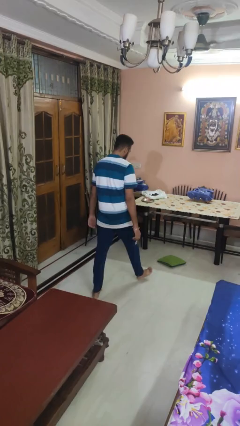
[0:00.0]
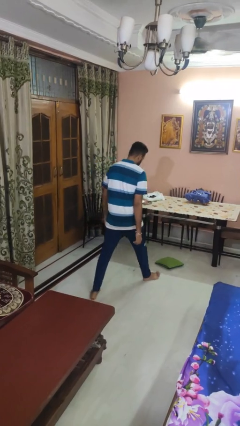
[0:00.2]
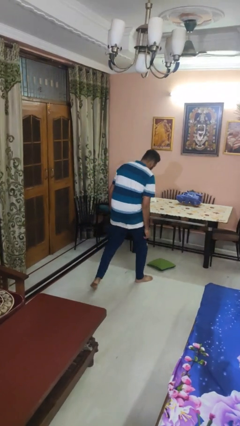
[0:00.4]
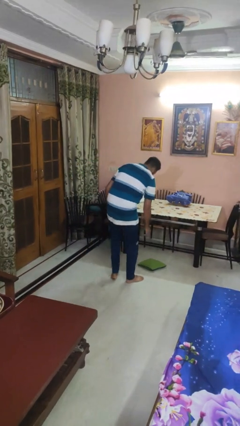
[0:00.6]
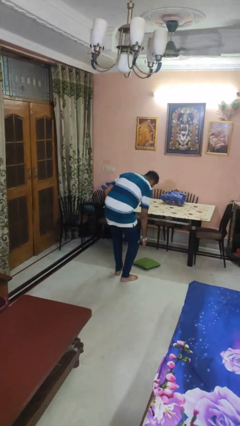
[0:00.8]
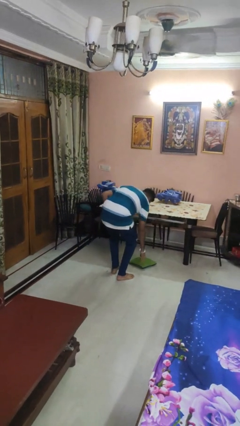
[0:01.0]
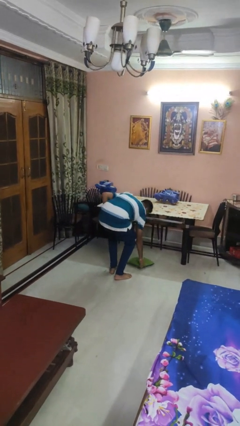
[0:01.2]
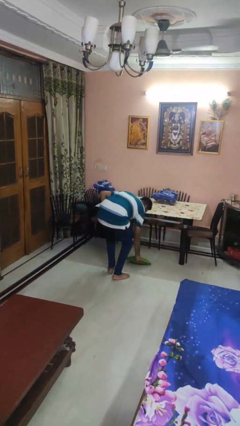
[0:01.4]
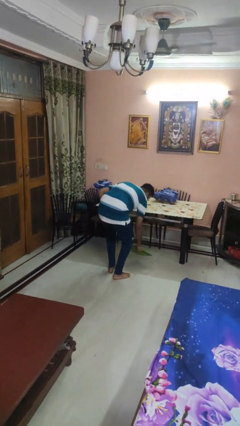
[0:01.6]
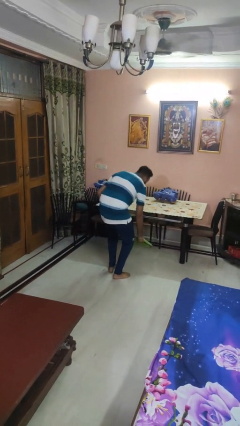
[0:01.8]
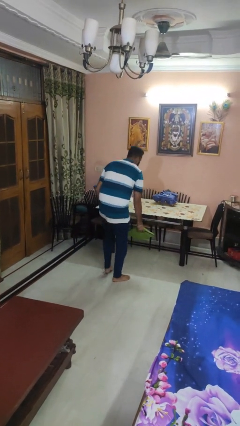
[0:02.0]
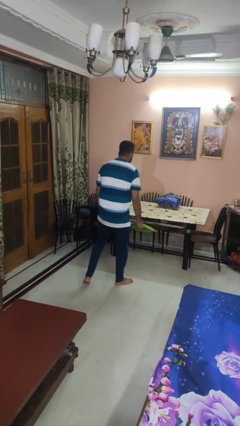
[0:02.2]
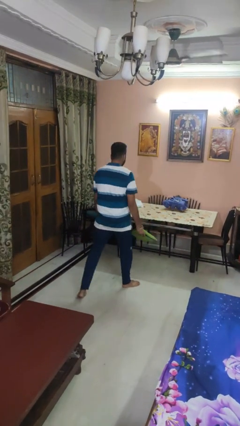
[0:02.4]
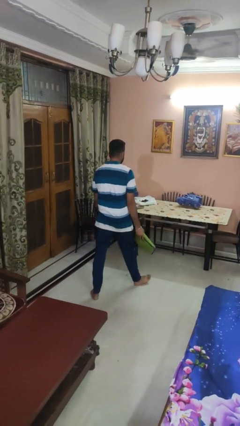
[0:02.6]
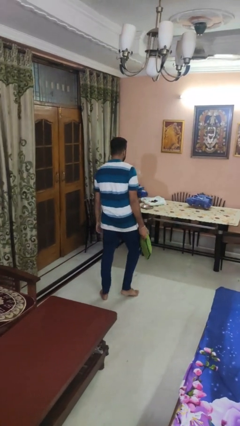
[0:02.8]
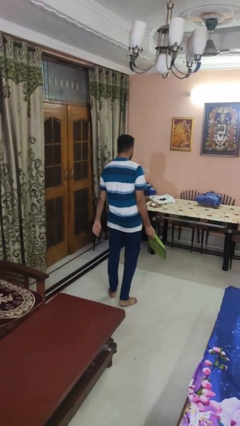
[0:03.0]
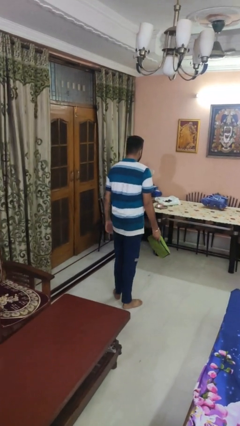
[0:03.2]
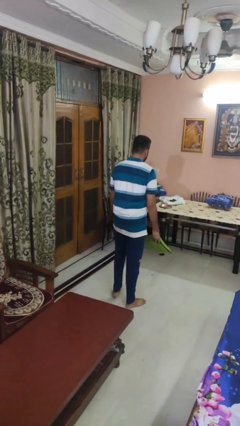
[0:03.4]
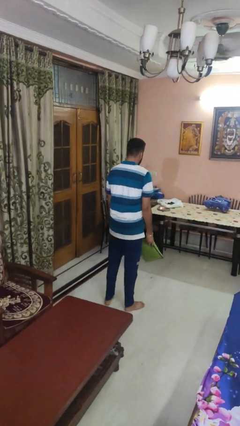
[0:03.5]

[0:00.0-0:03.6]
person picks up object from floor

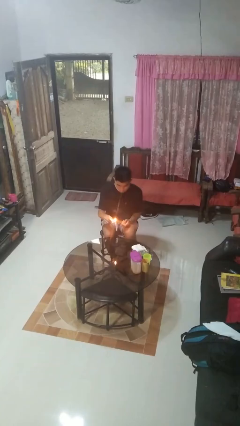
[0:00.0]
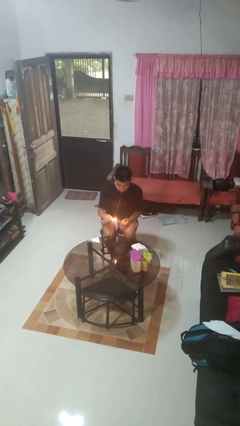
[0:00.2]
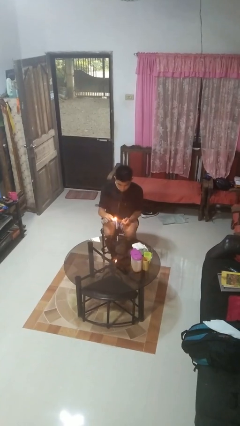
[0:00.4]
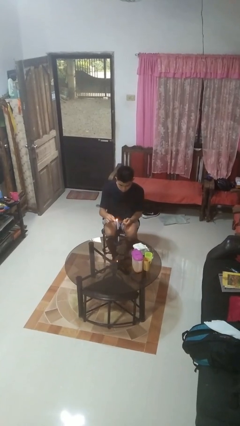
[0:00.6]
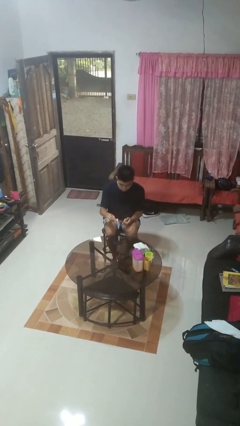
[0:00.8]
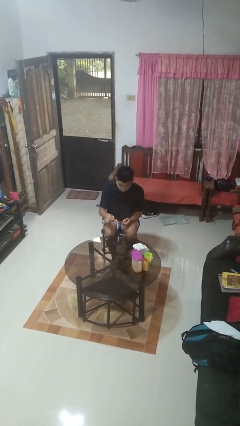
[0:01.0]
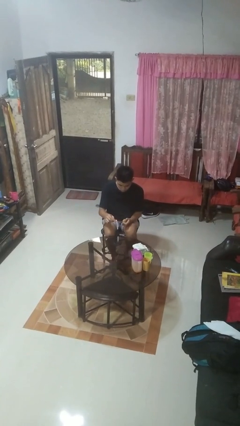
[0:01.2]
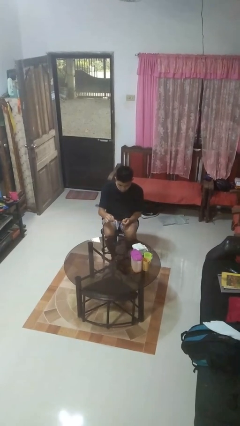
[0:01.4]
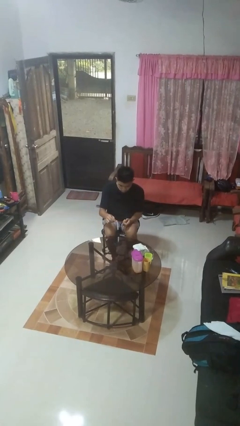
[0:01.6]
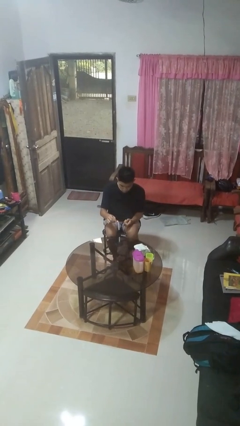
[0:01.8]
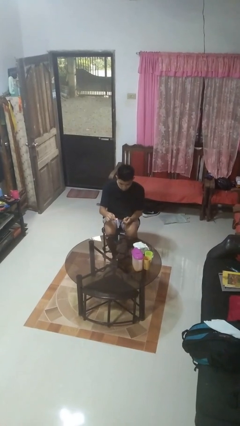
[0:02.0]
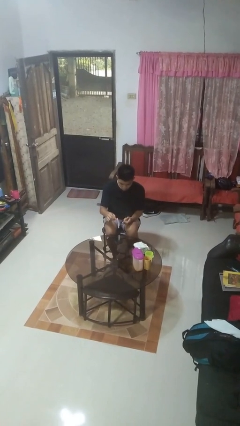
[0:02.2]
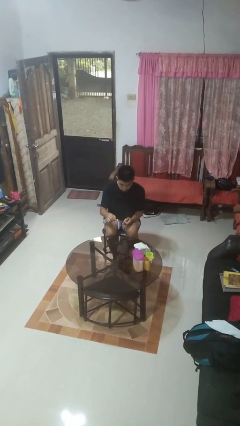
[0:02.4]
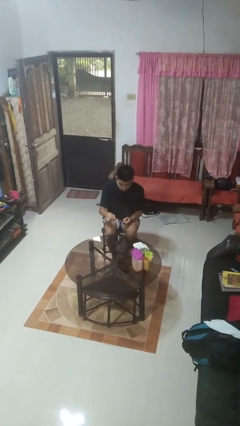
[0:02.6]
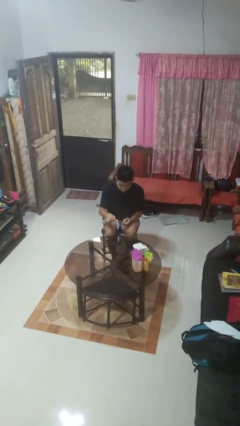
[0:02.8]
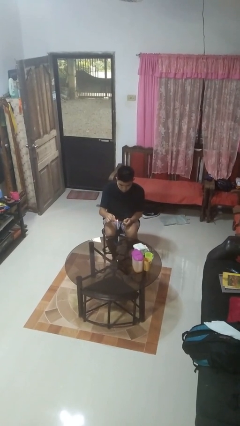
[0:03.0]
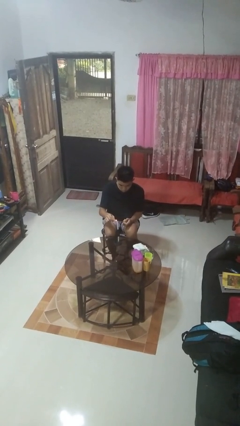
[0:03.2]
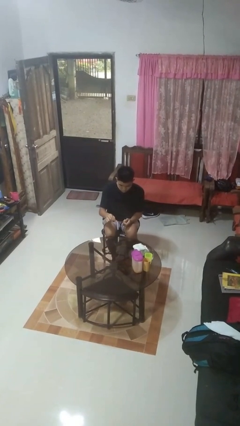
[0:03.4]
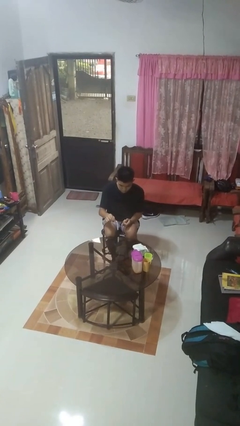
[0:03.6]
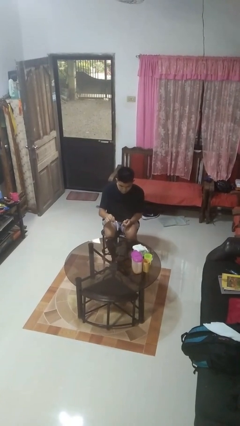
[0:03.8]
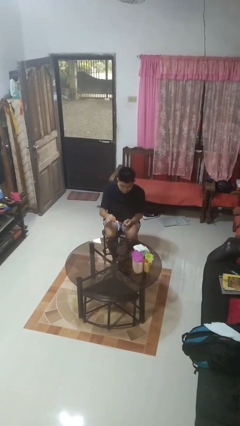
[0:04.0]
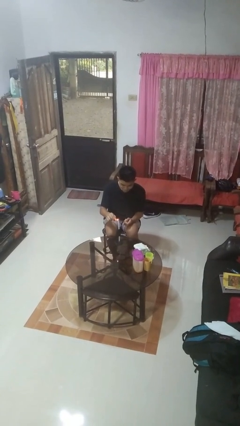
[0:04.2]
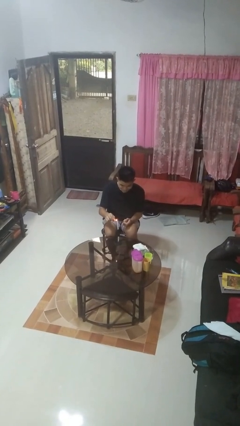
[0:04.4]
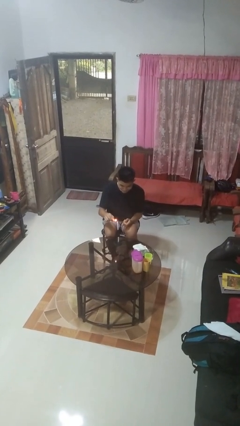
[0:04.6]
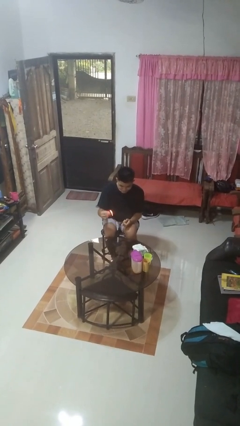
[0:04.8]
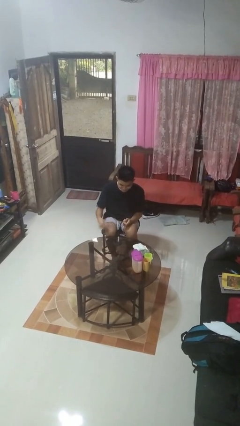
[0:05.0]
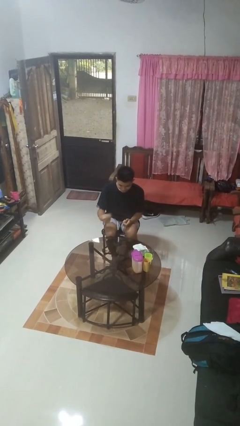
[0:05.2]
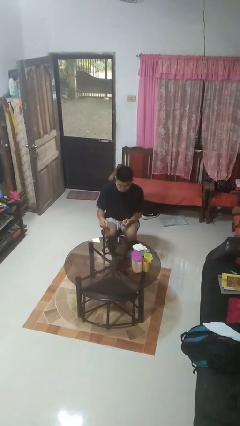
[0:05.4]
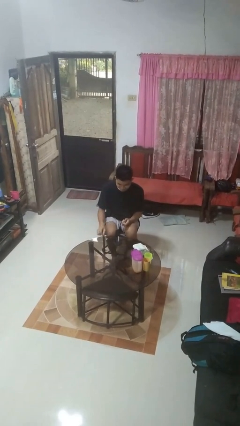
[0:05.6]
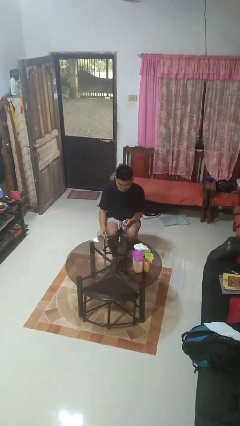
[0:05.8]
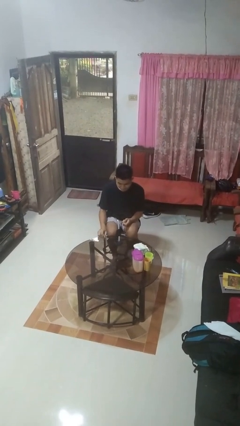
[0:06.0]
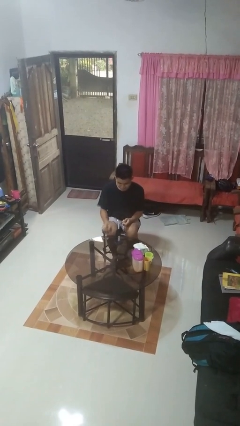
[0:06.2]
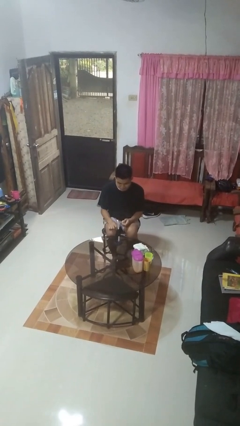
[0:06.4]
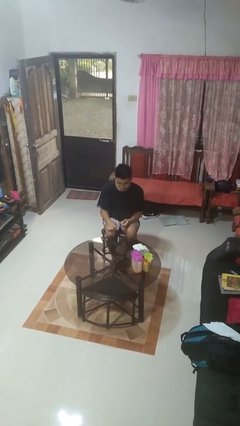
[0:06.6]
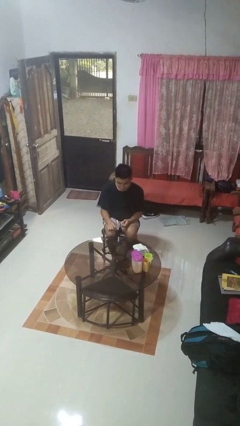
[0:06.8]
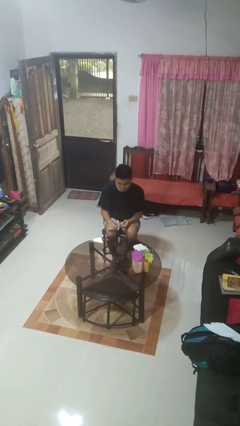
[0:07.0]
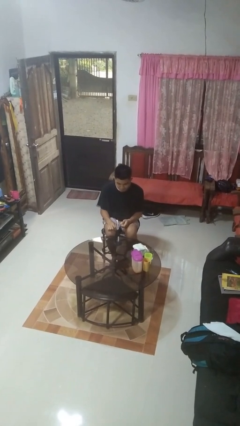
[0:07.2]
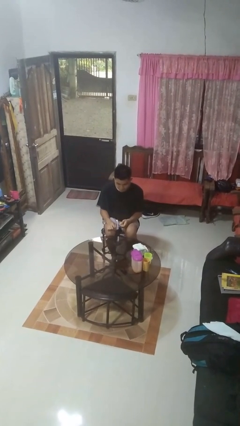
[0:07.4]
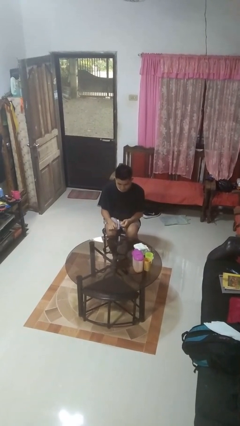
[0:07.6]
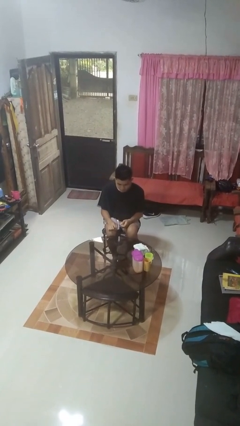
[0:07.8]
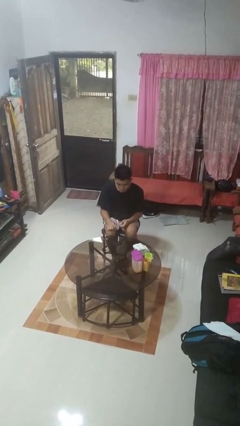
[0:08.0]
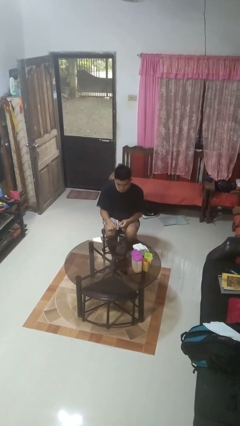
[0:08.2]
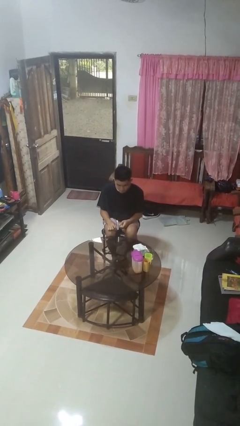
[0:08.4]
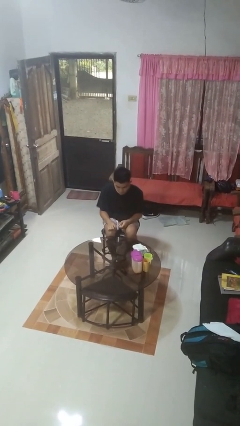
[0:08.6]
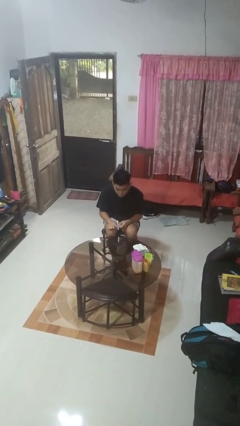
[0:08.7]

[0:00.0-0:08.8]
person lights candle

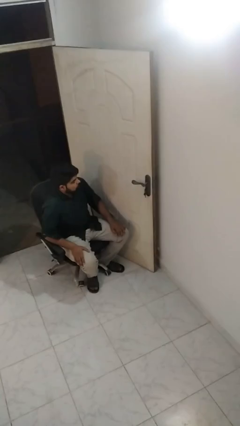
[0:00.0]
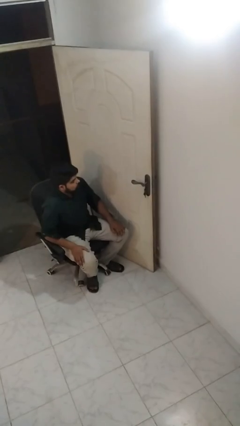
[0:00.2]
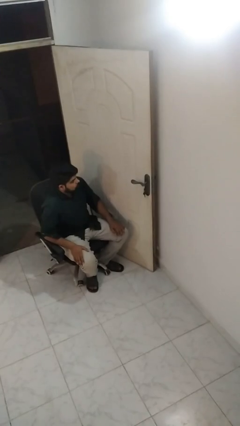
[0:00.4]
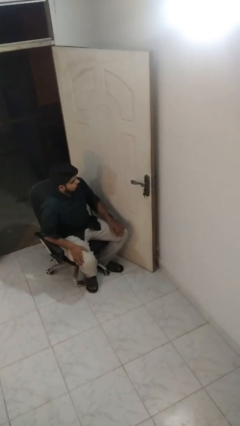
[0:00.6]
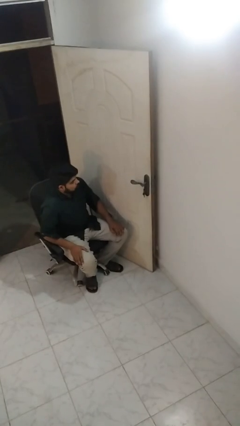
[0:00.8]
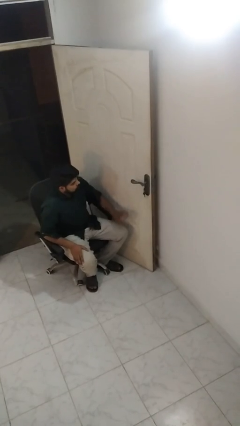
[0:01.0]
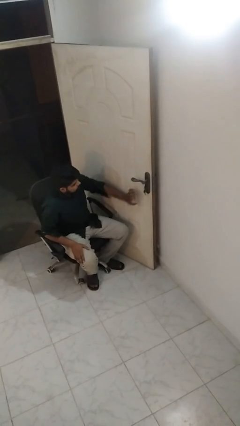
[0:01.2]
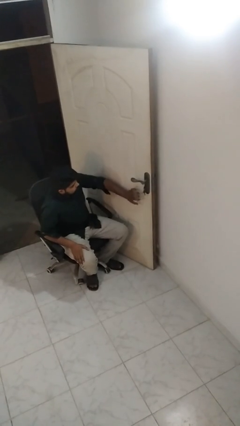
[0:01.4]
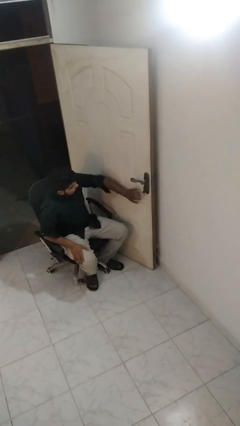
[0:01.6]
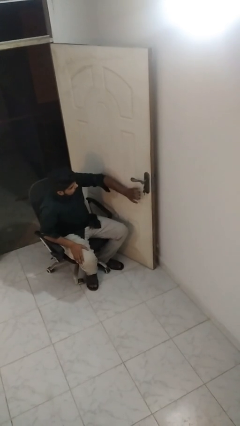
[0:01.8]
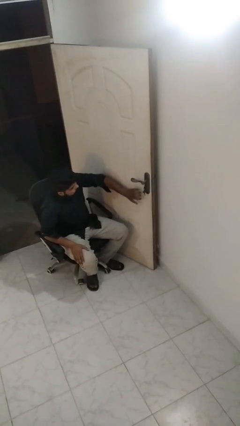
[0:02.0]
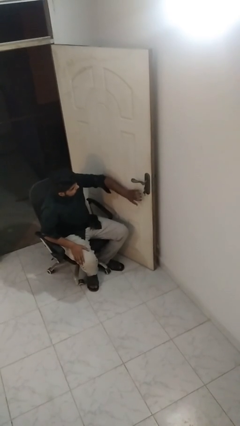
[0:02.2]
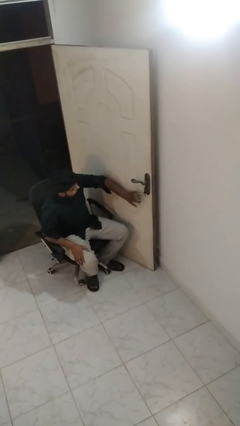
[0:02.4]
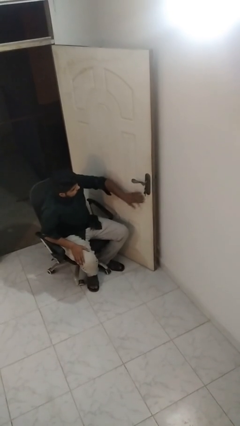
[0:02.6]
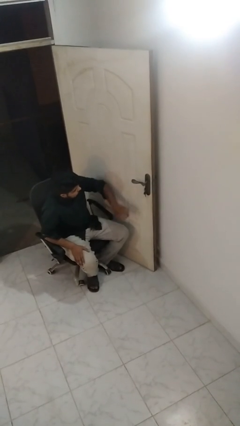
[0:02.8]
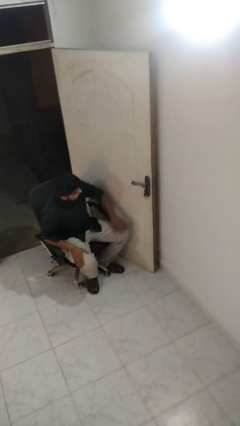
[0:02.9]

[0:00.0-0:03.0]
person taps object with finger

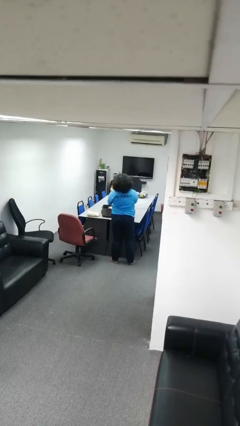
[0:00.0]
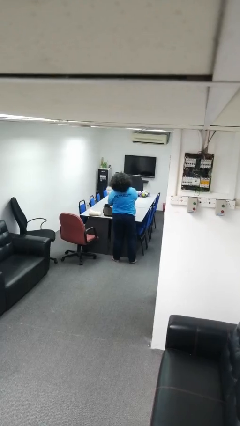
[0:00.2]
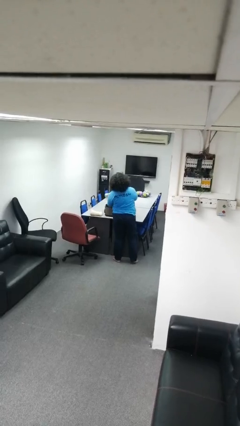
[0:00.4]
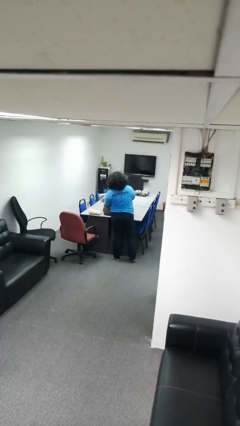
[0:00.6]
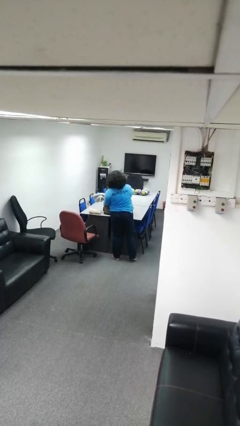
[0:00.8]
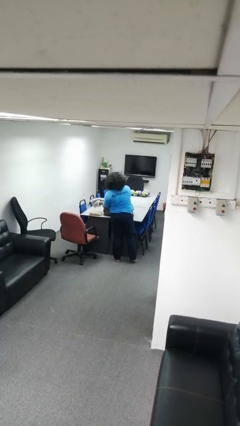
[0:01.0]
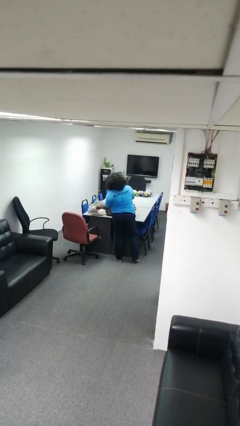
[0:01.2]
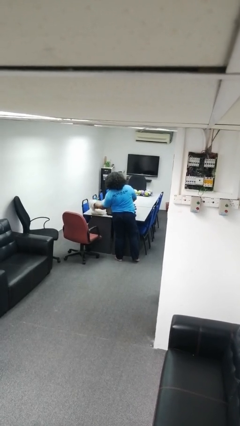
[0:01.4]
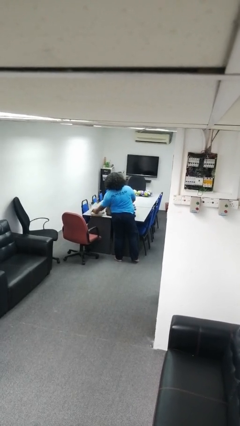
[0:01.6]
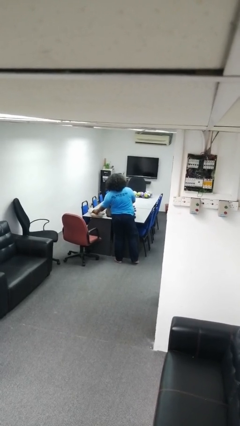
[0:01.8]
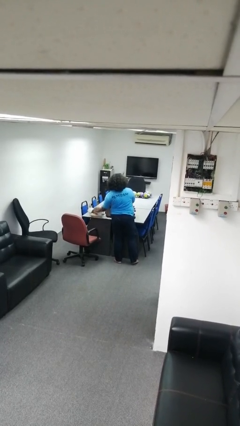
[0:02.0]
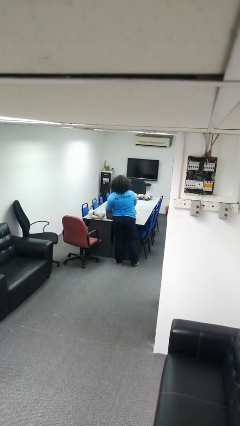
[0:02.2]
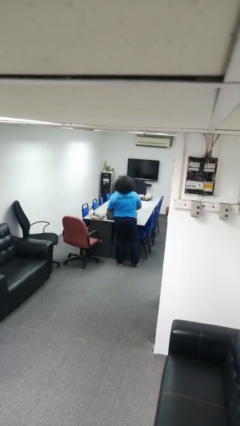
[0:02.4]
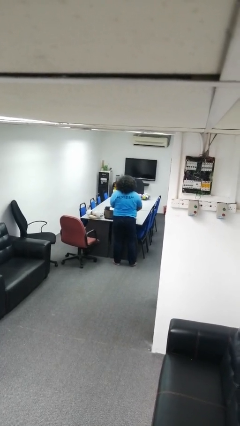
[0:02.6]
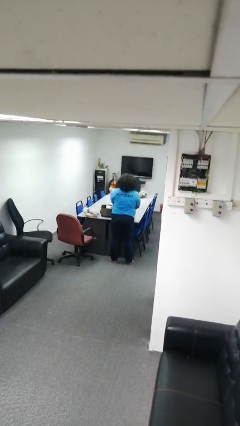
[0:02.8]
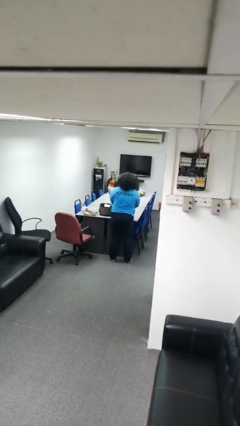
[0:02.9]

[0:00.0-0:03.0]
person unloads clothes from suitcase
